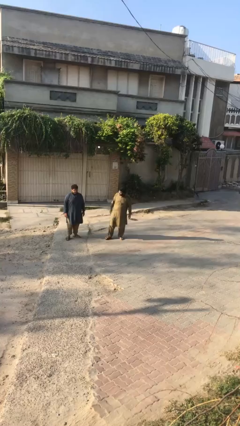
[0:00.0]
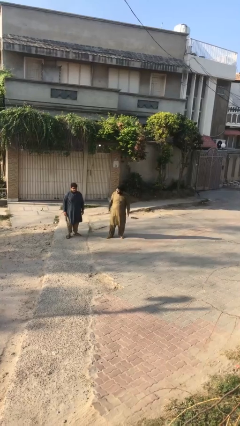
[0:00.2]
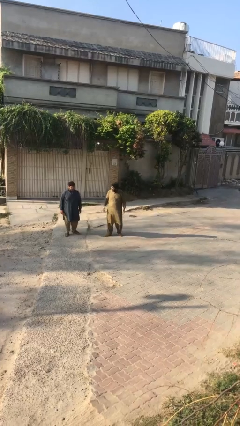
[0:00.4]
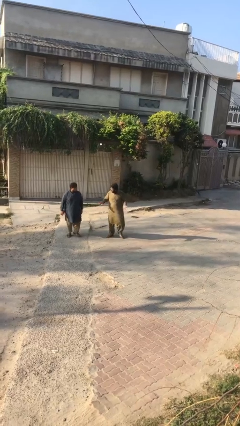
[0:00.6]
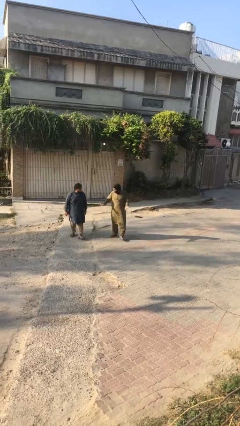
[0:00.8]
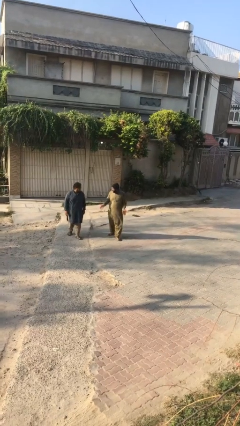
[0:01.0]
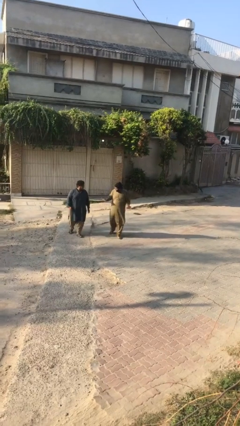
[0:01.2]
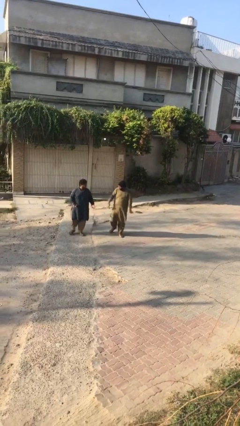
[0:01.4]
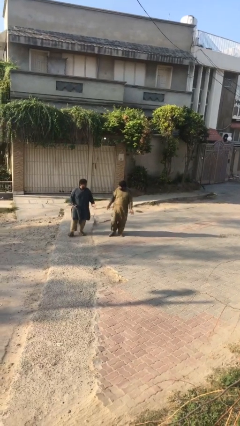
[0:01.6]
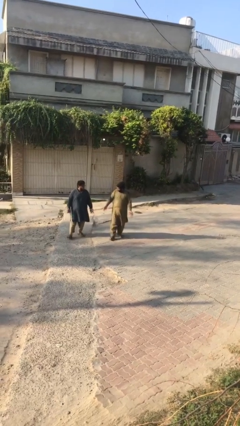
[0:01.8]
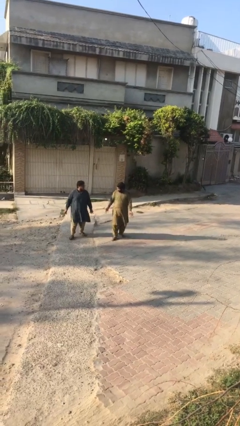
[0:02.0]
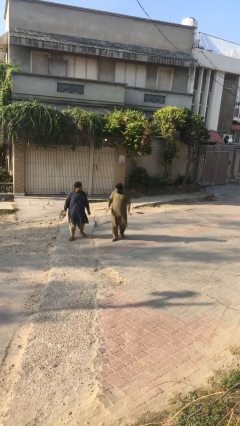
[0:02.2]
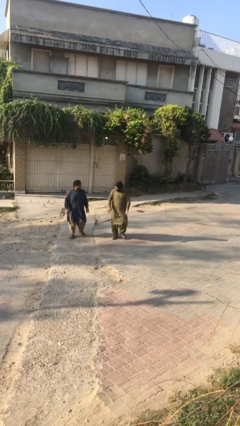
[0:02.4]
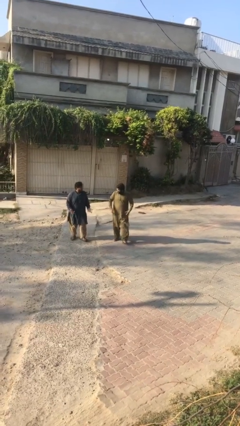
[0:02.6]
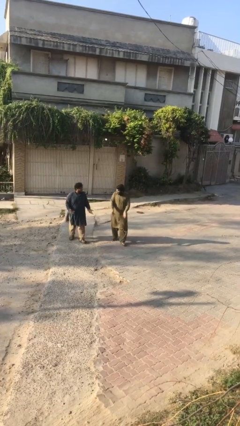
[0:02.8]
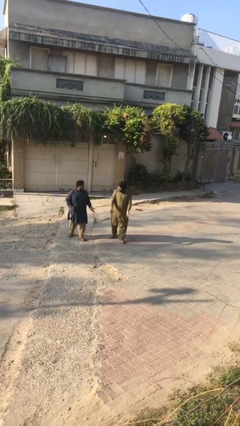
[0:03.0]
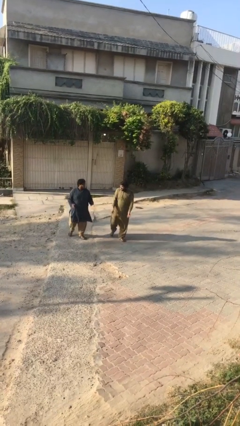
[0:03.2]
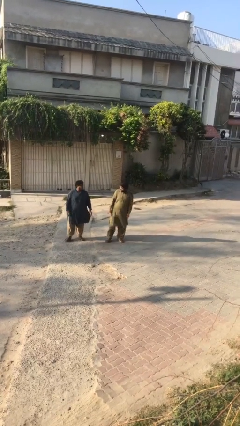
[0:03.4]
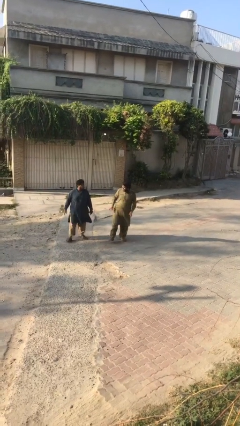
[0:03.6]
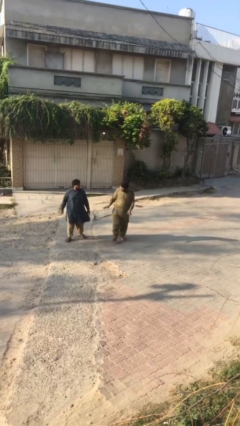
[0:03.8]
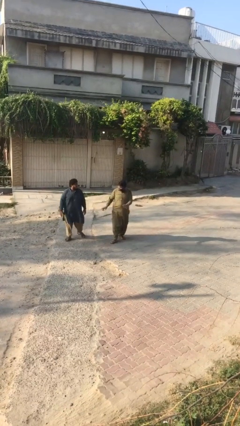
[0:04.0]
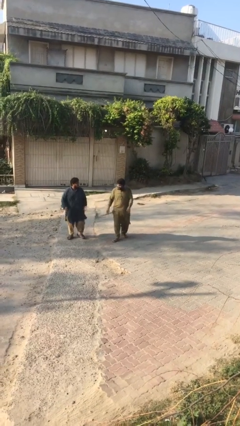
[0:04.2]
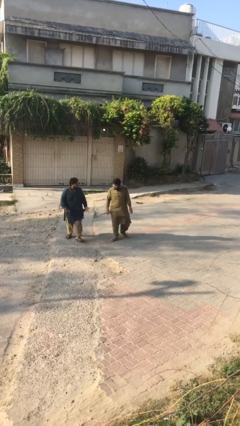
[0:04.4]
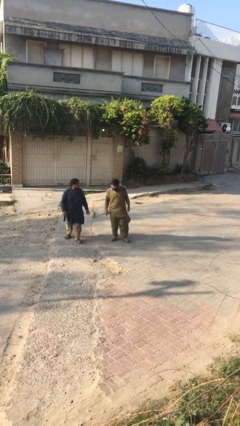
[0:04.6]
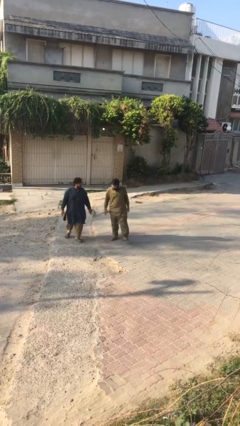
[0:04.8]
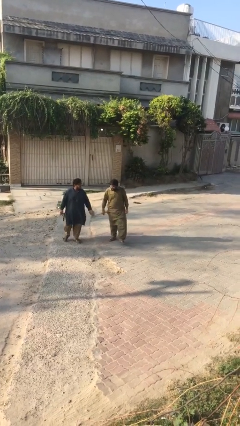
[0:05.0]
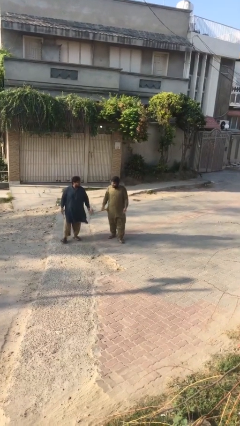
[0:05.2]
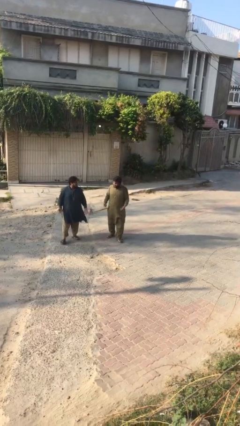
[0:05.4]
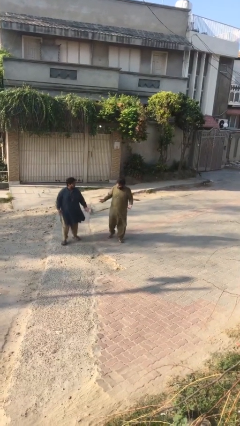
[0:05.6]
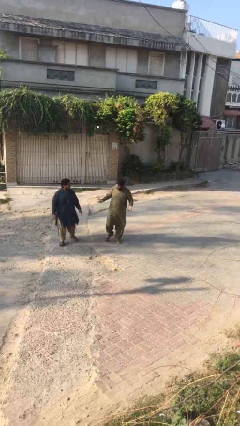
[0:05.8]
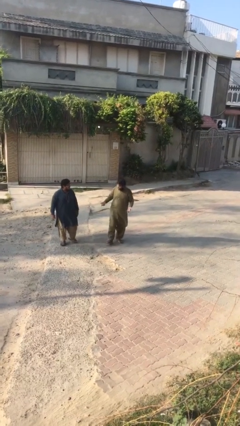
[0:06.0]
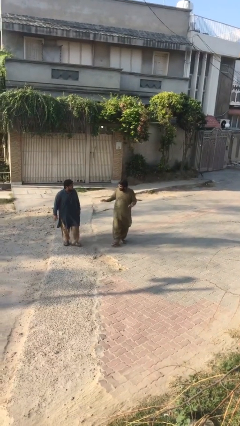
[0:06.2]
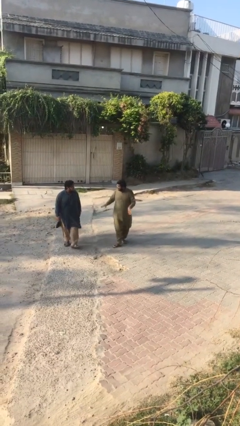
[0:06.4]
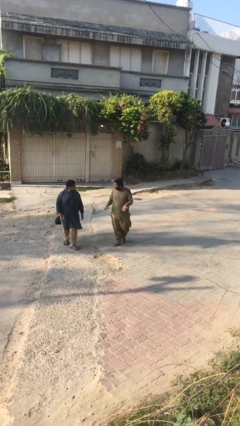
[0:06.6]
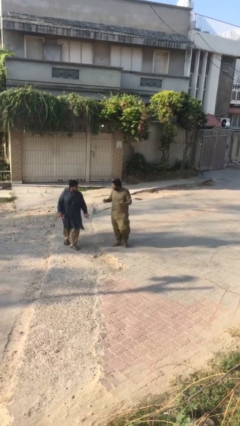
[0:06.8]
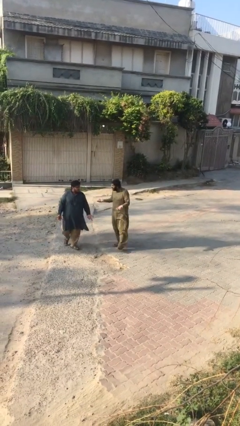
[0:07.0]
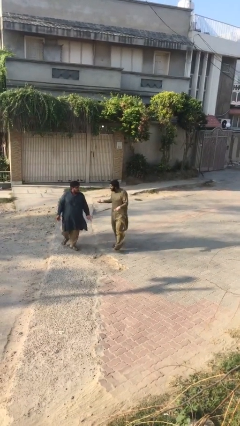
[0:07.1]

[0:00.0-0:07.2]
person talks to person

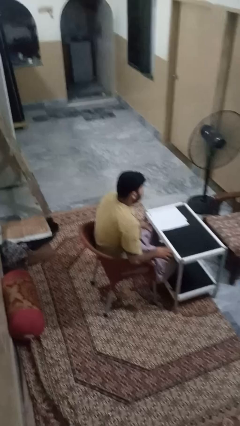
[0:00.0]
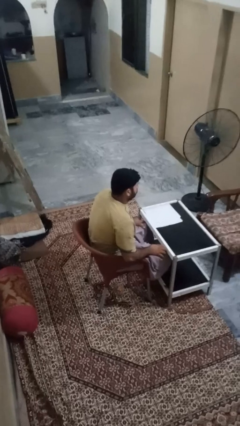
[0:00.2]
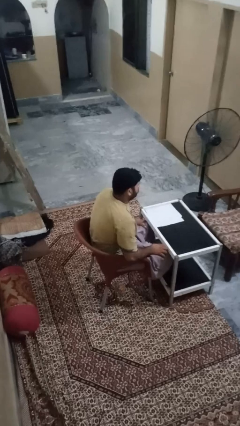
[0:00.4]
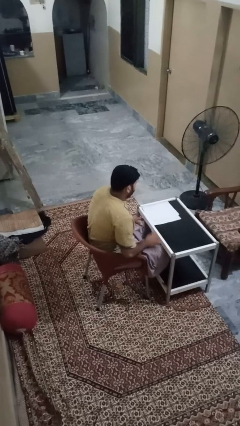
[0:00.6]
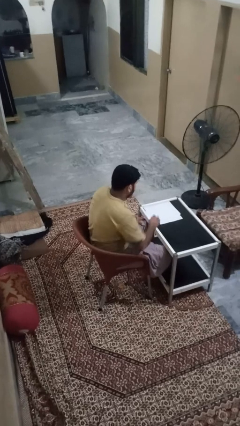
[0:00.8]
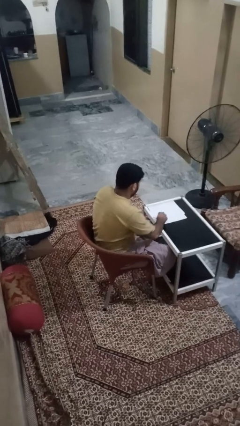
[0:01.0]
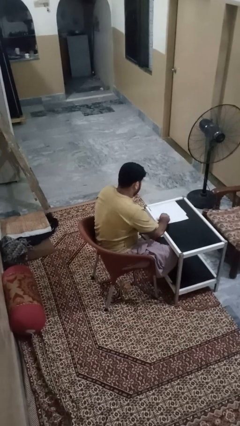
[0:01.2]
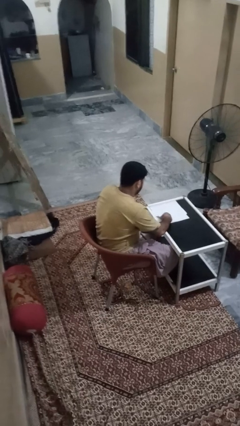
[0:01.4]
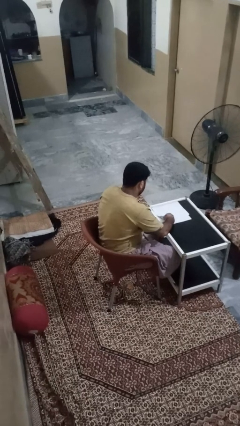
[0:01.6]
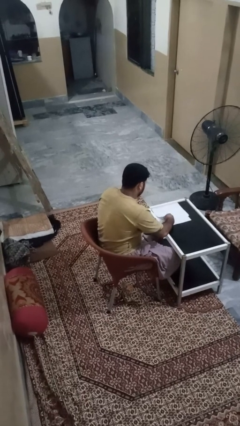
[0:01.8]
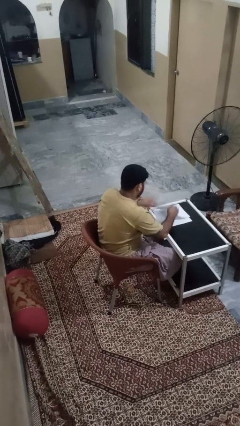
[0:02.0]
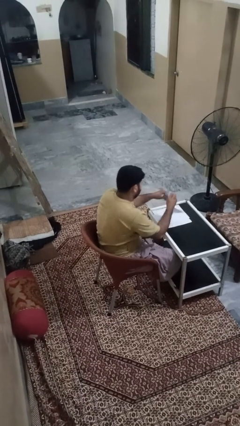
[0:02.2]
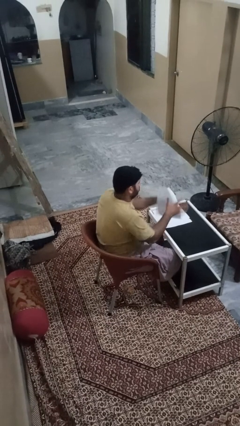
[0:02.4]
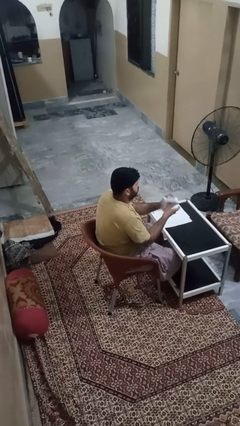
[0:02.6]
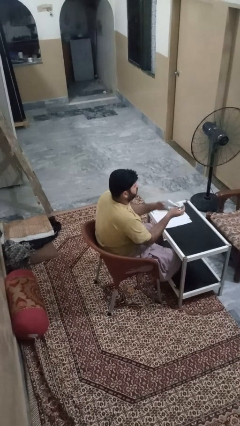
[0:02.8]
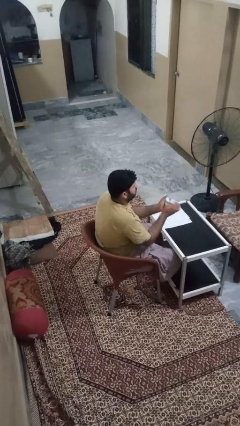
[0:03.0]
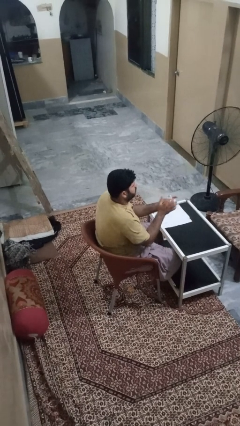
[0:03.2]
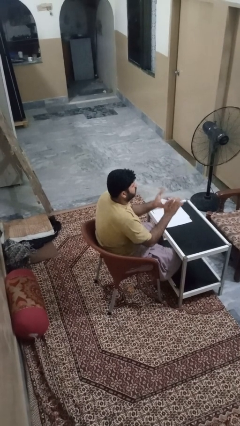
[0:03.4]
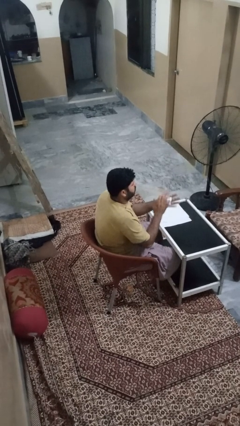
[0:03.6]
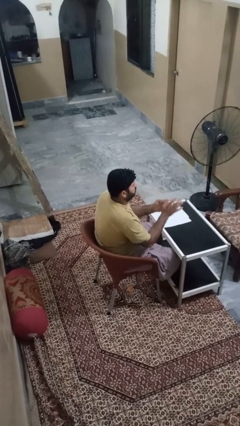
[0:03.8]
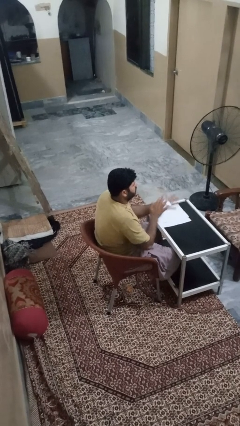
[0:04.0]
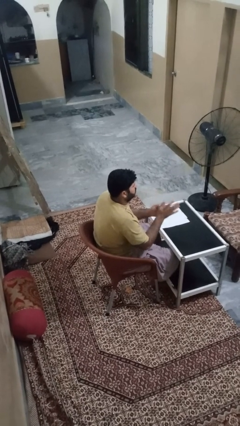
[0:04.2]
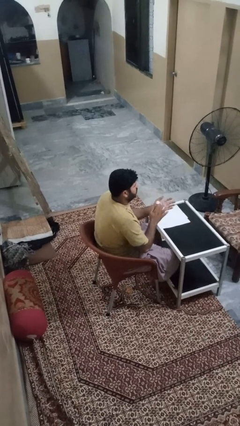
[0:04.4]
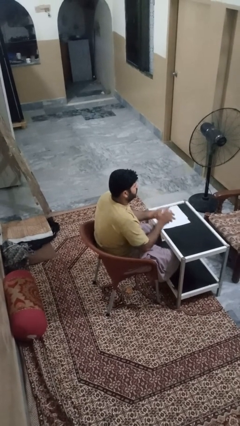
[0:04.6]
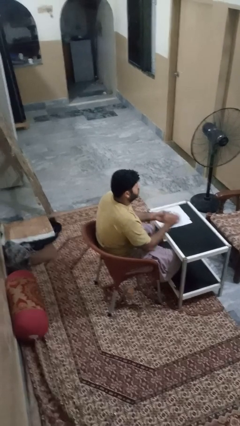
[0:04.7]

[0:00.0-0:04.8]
person crumples paper

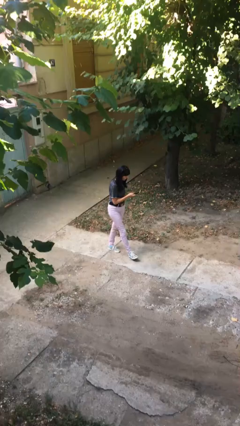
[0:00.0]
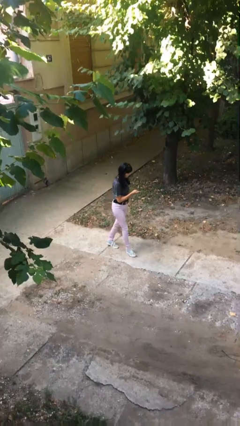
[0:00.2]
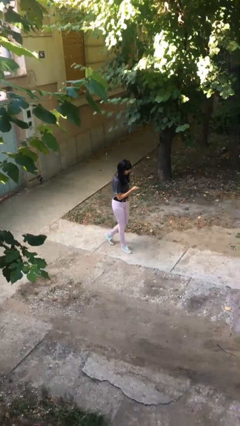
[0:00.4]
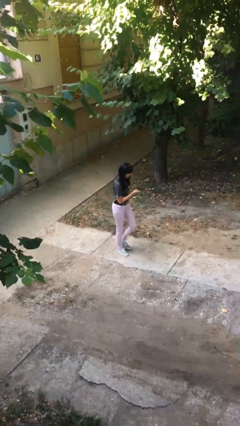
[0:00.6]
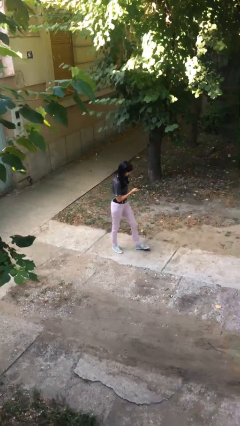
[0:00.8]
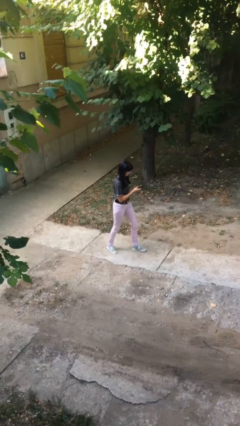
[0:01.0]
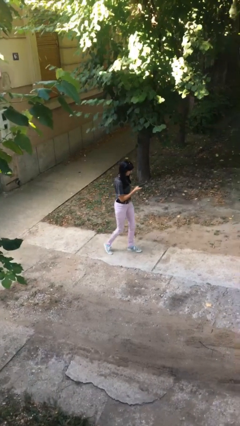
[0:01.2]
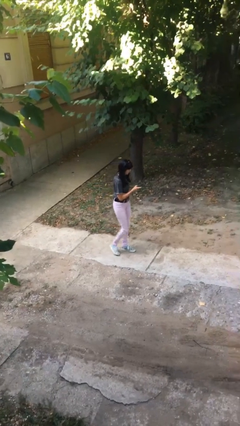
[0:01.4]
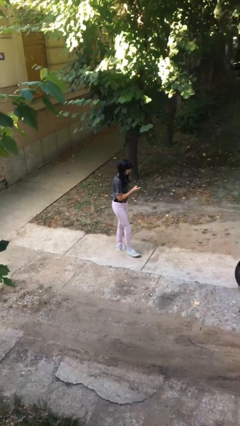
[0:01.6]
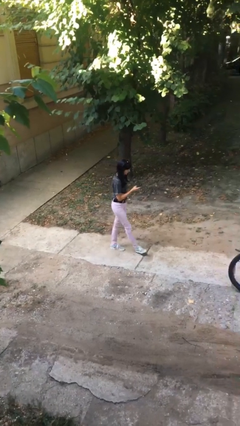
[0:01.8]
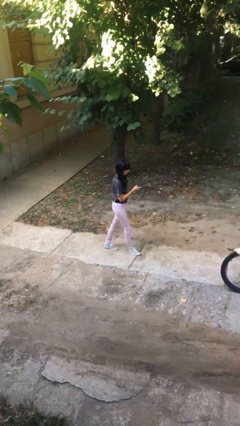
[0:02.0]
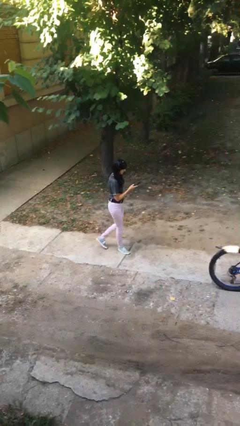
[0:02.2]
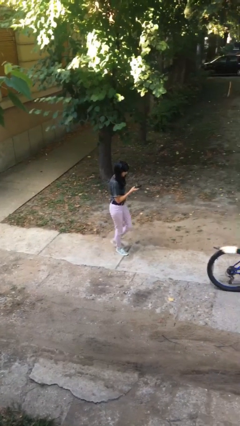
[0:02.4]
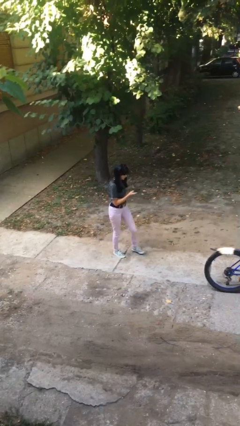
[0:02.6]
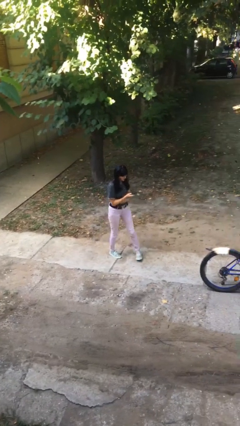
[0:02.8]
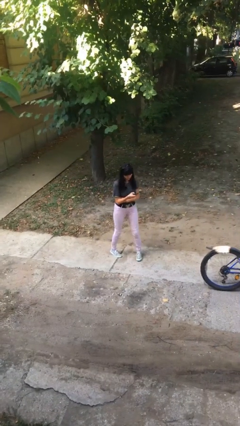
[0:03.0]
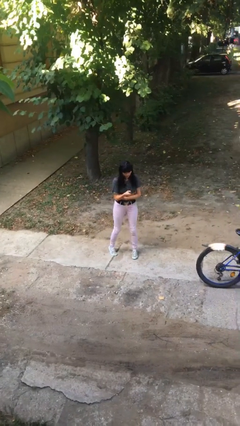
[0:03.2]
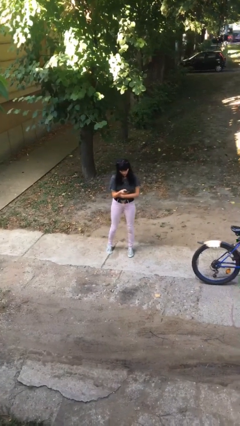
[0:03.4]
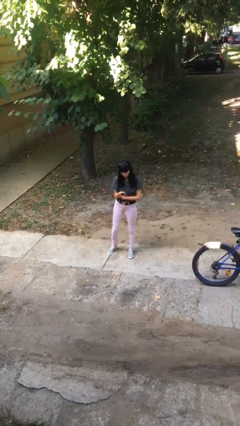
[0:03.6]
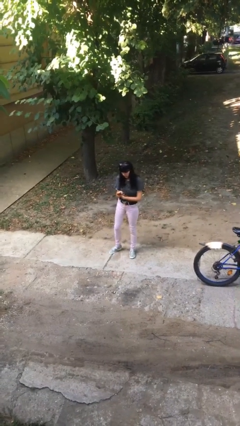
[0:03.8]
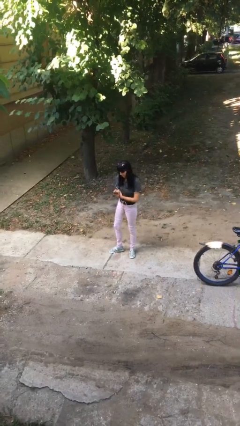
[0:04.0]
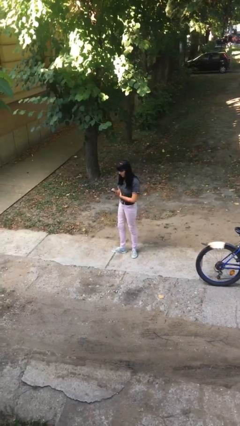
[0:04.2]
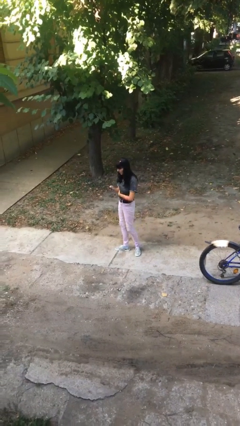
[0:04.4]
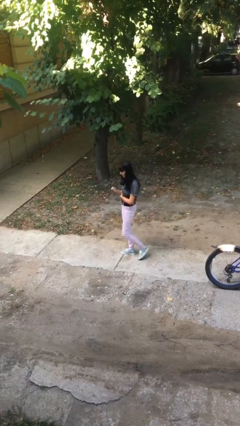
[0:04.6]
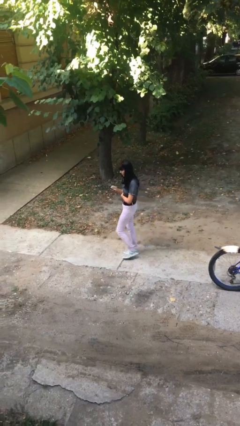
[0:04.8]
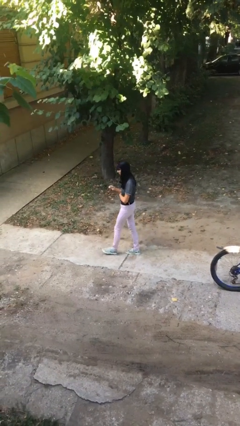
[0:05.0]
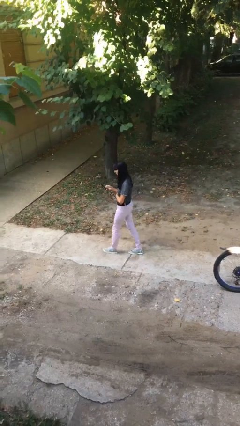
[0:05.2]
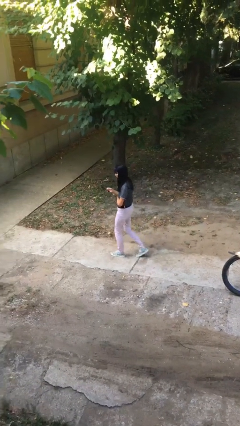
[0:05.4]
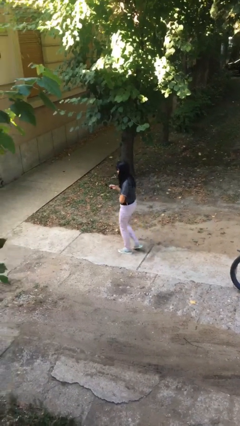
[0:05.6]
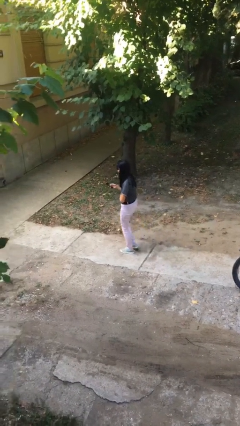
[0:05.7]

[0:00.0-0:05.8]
person texts on phone

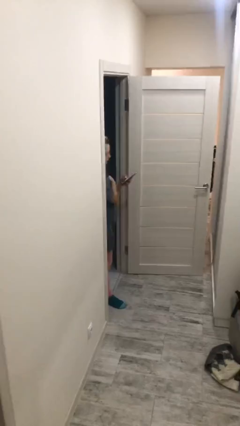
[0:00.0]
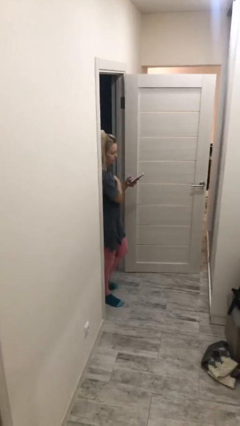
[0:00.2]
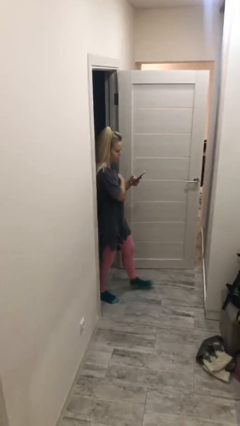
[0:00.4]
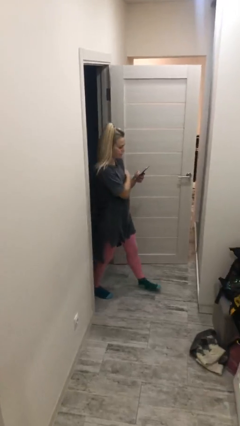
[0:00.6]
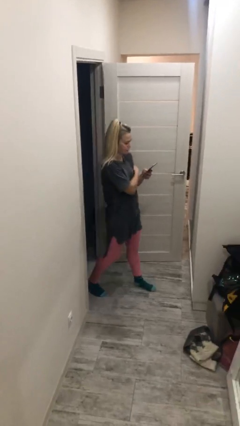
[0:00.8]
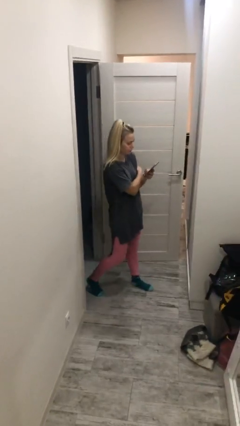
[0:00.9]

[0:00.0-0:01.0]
person enters scene through structure
